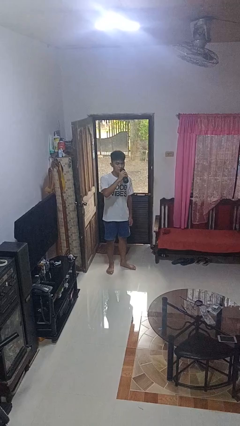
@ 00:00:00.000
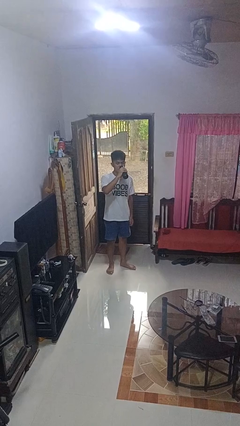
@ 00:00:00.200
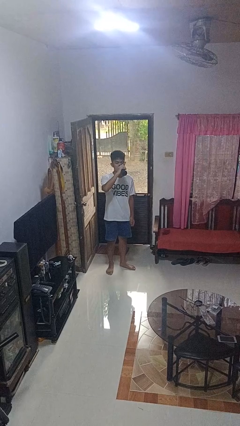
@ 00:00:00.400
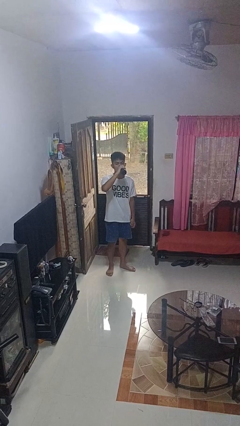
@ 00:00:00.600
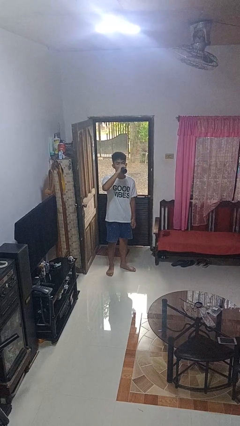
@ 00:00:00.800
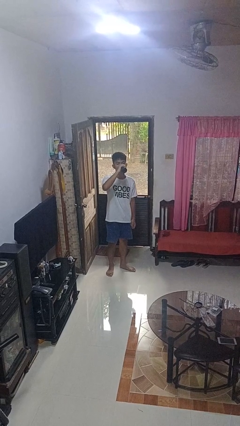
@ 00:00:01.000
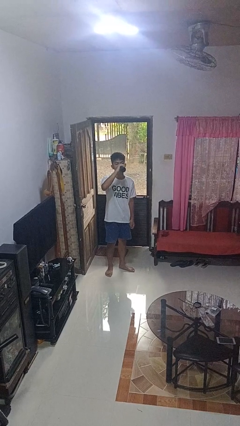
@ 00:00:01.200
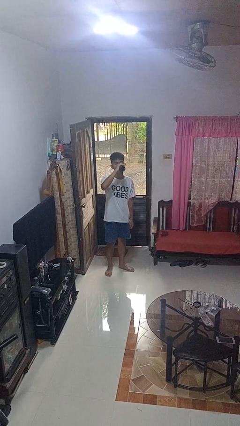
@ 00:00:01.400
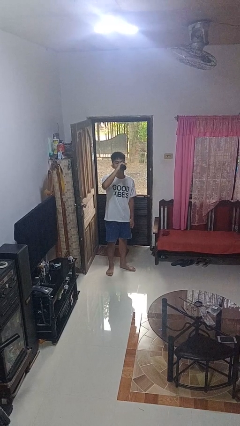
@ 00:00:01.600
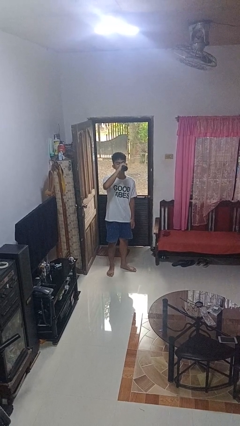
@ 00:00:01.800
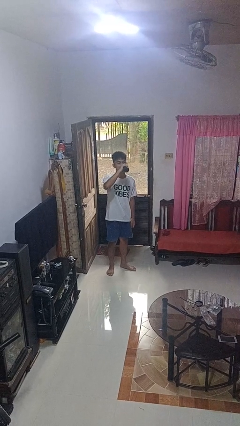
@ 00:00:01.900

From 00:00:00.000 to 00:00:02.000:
person drinks from bottle

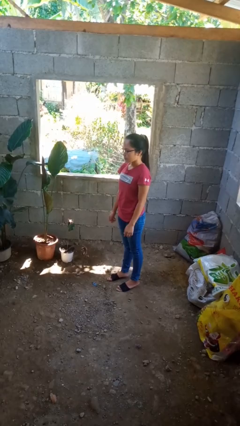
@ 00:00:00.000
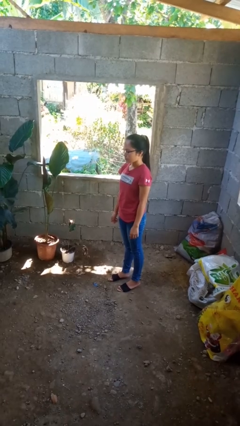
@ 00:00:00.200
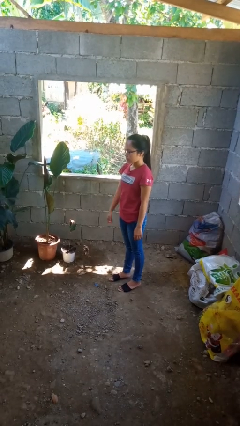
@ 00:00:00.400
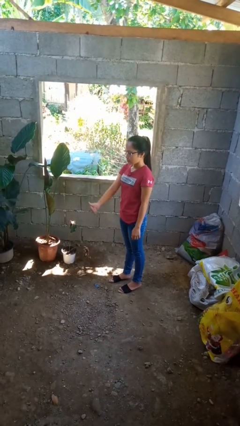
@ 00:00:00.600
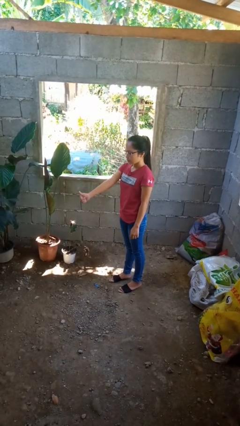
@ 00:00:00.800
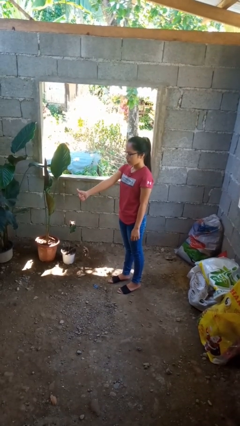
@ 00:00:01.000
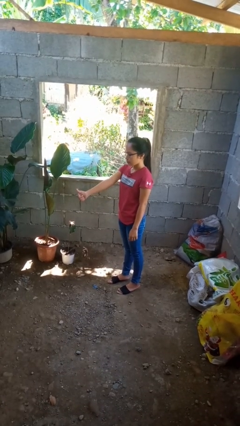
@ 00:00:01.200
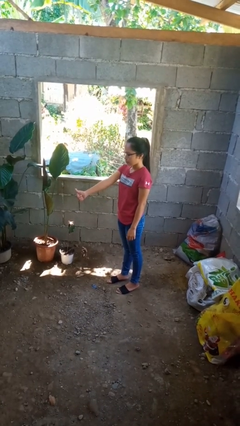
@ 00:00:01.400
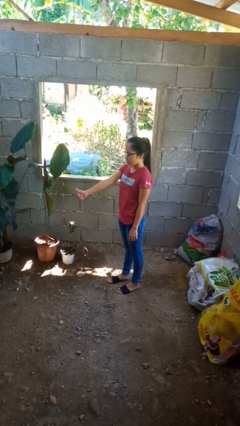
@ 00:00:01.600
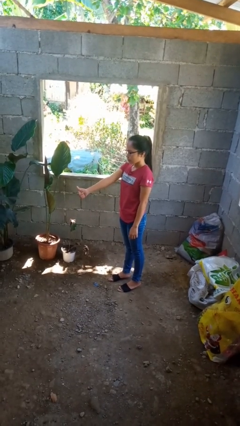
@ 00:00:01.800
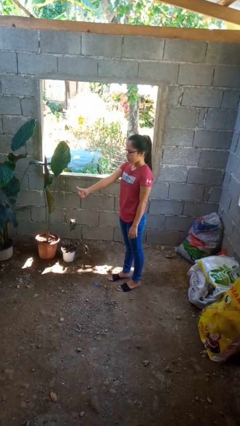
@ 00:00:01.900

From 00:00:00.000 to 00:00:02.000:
person gestures thumbs up

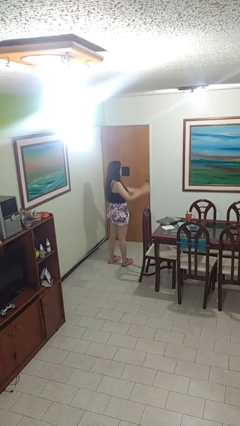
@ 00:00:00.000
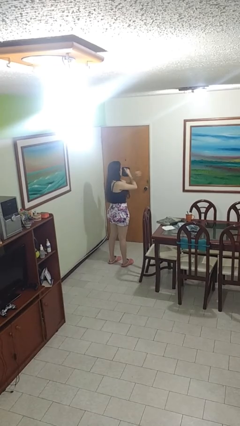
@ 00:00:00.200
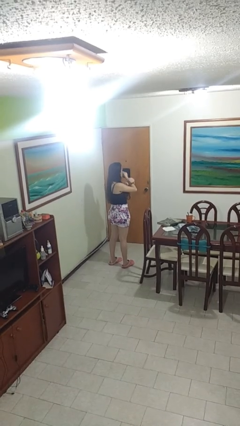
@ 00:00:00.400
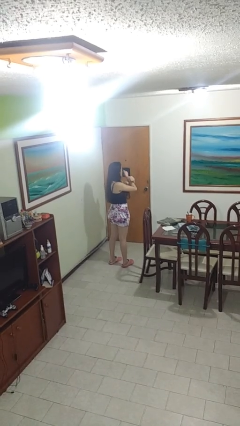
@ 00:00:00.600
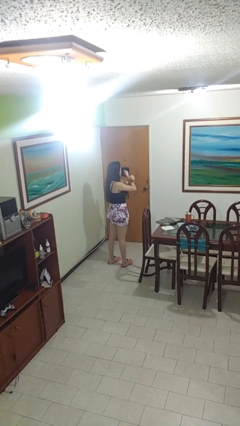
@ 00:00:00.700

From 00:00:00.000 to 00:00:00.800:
person gestures arms x

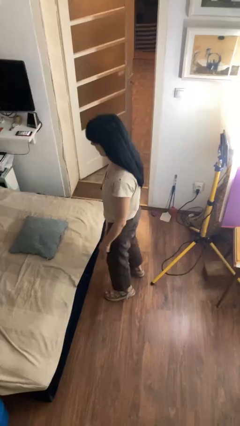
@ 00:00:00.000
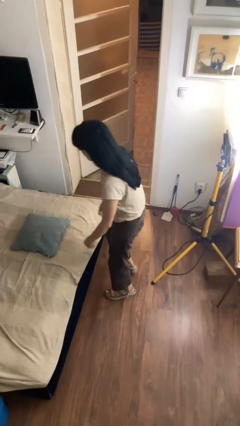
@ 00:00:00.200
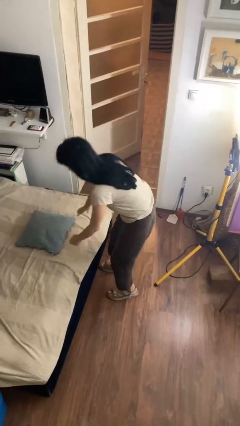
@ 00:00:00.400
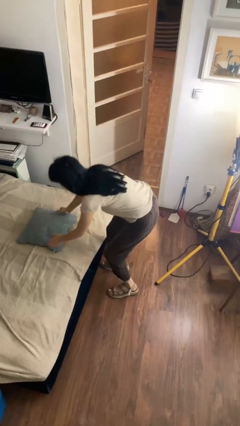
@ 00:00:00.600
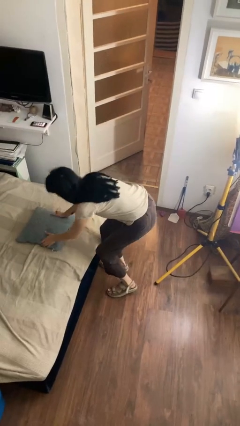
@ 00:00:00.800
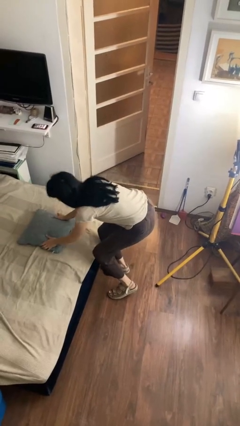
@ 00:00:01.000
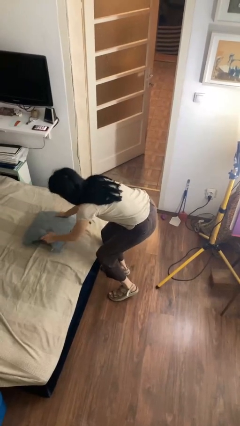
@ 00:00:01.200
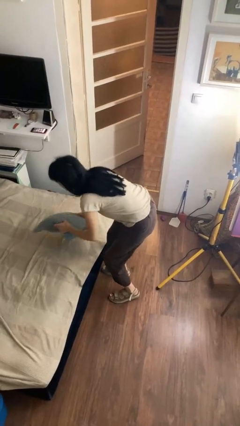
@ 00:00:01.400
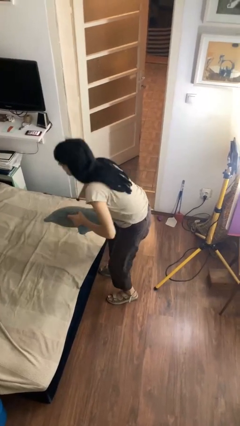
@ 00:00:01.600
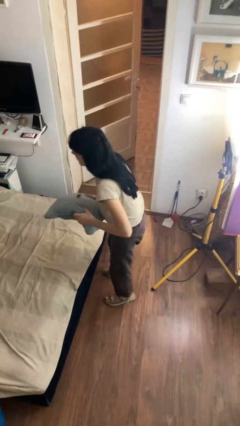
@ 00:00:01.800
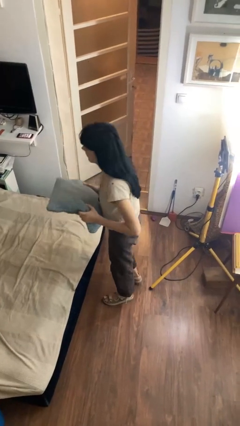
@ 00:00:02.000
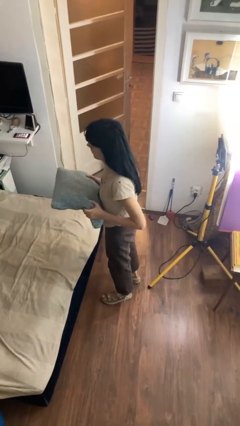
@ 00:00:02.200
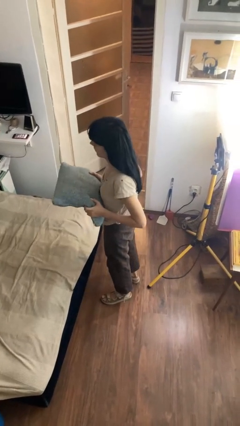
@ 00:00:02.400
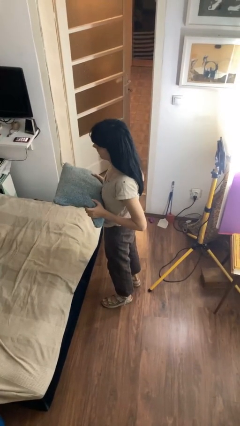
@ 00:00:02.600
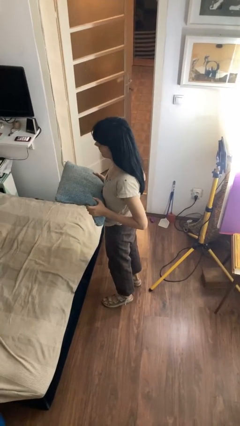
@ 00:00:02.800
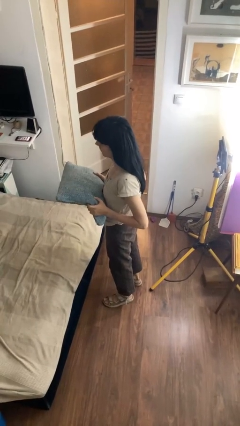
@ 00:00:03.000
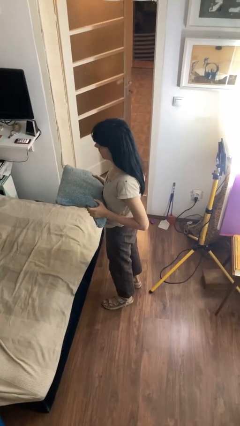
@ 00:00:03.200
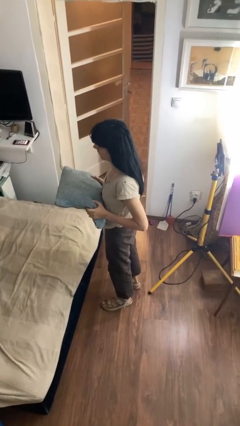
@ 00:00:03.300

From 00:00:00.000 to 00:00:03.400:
person picks up object from bed

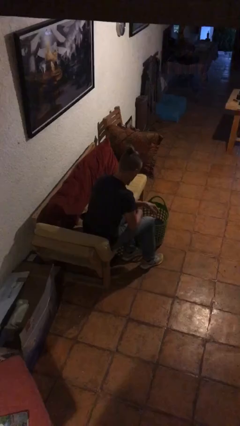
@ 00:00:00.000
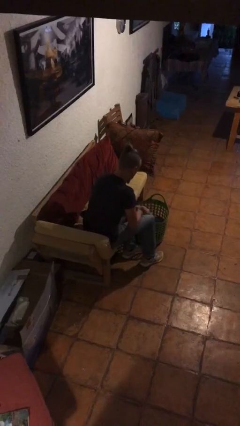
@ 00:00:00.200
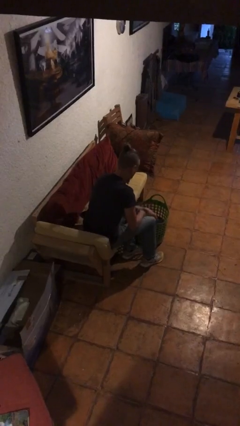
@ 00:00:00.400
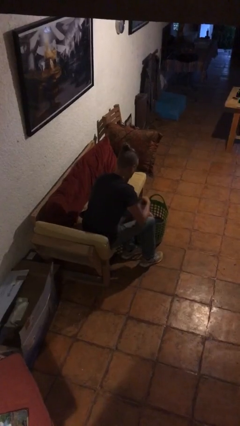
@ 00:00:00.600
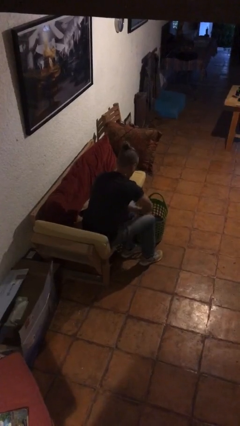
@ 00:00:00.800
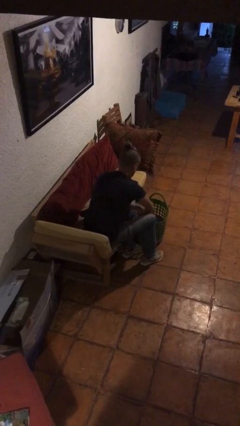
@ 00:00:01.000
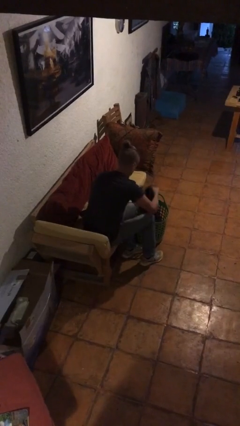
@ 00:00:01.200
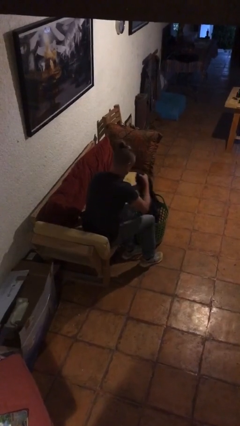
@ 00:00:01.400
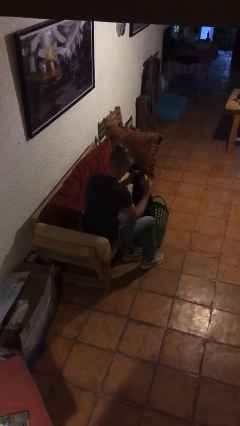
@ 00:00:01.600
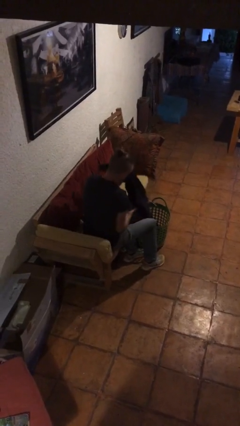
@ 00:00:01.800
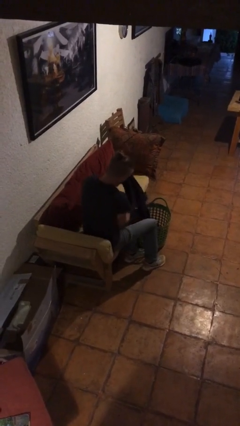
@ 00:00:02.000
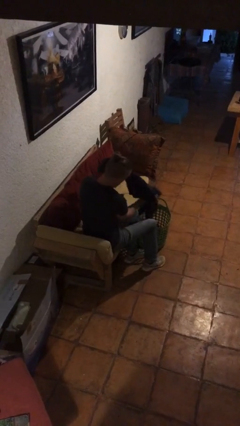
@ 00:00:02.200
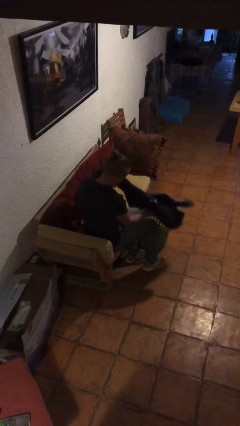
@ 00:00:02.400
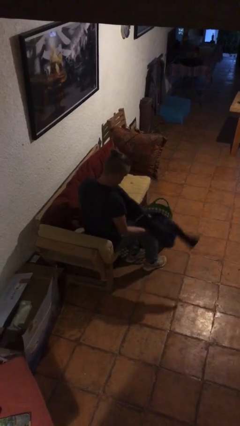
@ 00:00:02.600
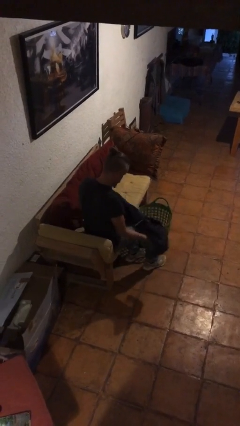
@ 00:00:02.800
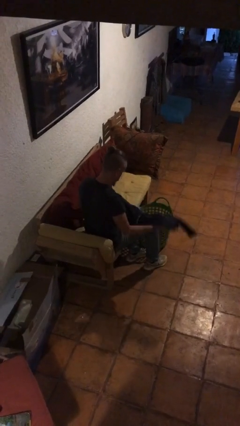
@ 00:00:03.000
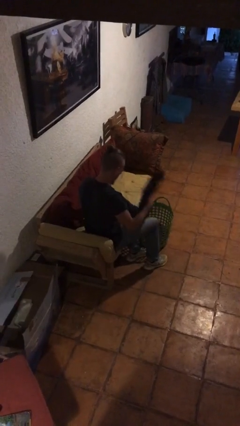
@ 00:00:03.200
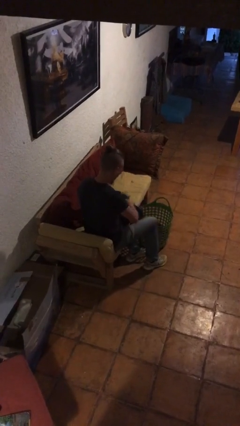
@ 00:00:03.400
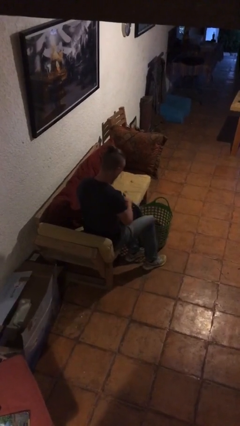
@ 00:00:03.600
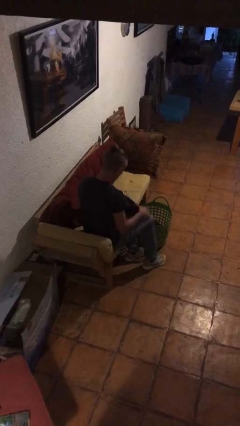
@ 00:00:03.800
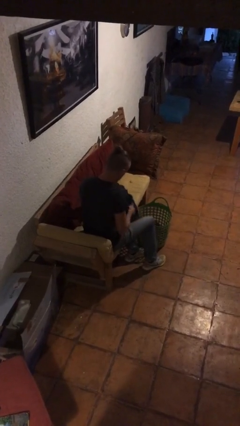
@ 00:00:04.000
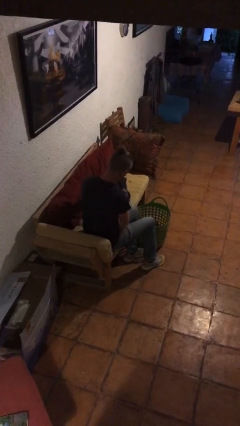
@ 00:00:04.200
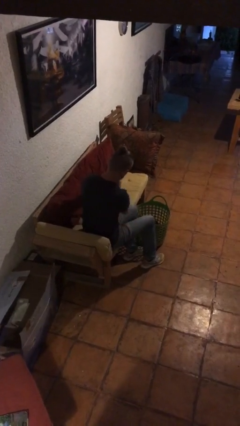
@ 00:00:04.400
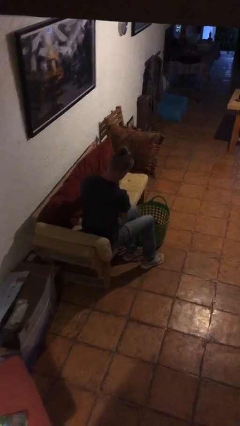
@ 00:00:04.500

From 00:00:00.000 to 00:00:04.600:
person folds pants

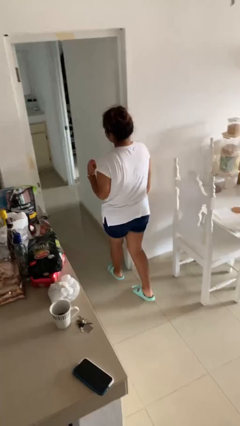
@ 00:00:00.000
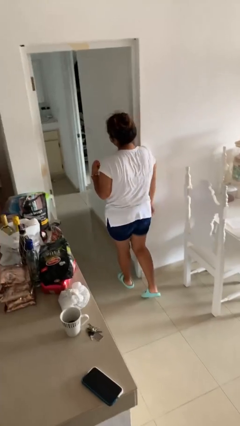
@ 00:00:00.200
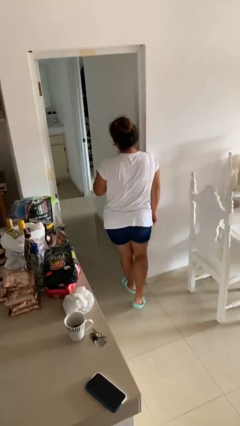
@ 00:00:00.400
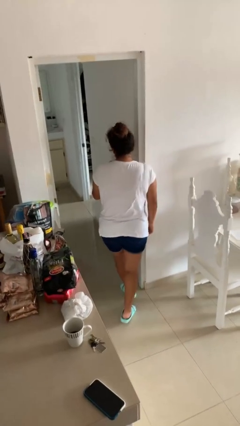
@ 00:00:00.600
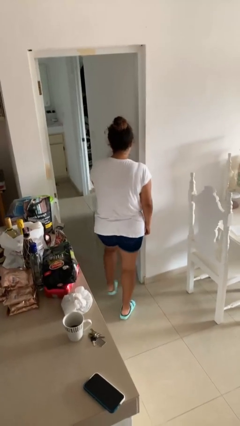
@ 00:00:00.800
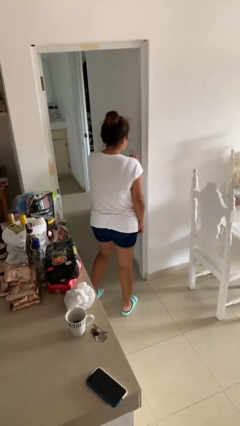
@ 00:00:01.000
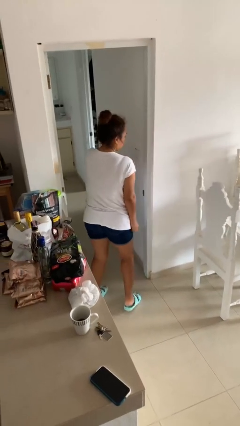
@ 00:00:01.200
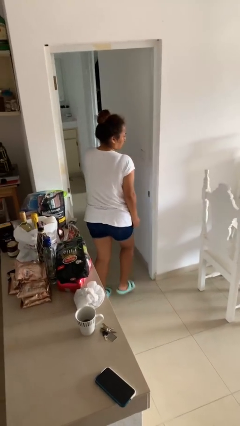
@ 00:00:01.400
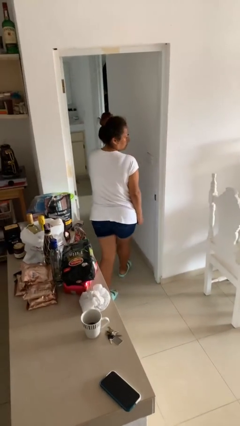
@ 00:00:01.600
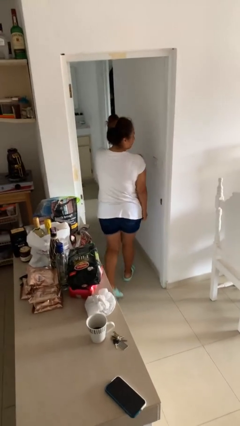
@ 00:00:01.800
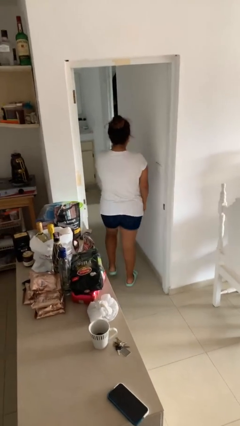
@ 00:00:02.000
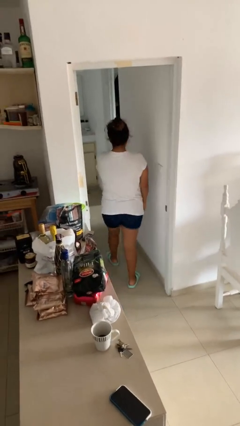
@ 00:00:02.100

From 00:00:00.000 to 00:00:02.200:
person bumps into wall

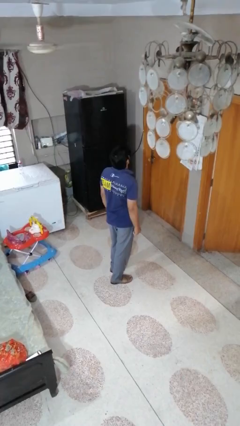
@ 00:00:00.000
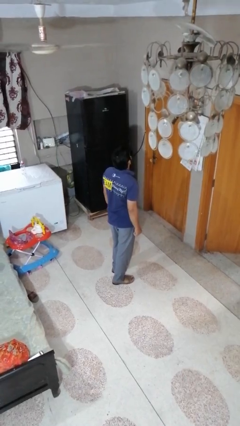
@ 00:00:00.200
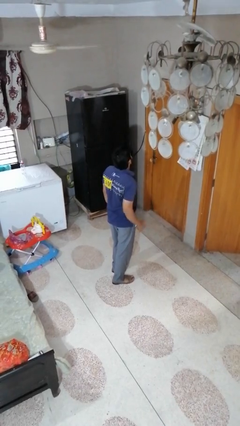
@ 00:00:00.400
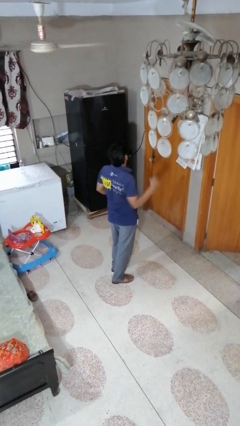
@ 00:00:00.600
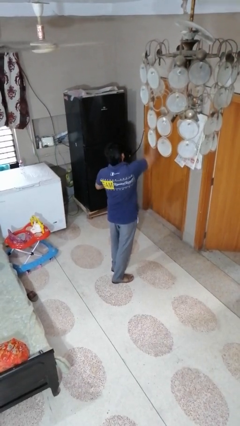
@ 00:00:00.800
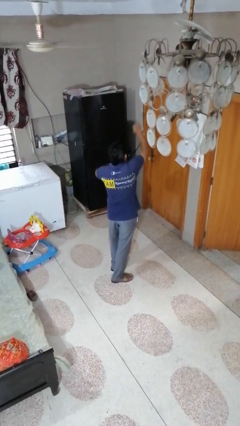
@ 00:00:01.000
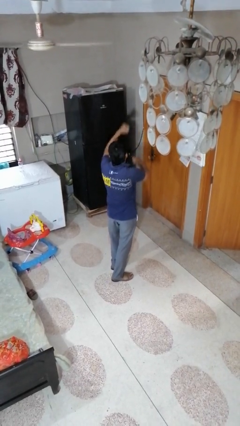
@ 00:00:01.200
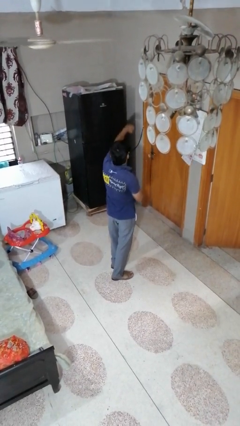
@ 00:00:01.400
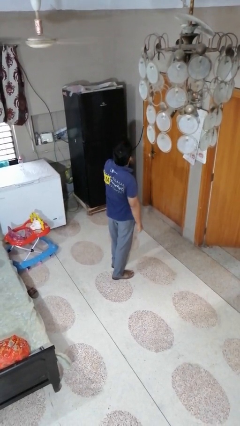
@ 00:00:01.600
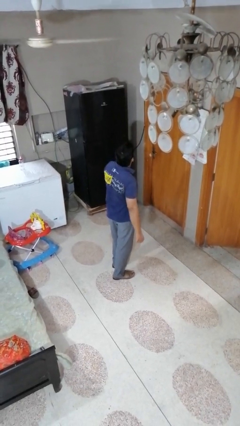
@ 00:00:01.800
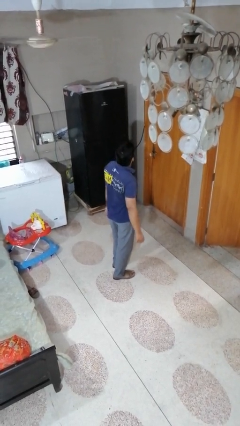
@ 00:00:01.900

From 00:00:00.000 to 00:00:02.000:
person punches
